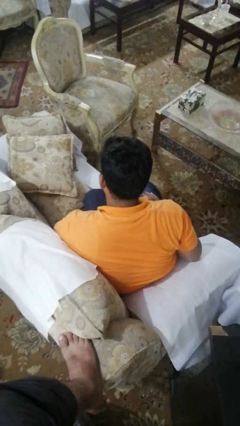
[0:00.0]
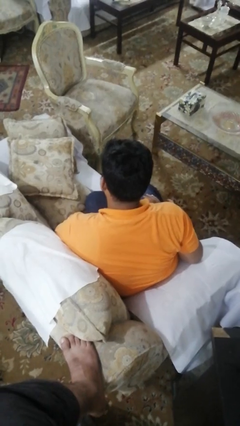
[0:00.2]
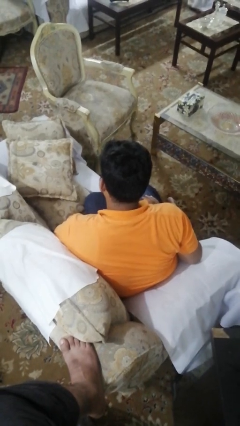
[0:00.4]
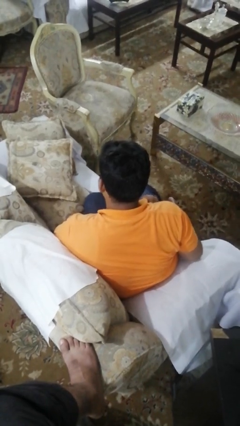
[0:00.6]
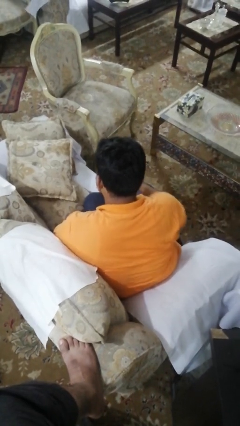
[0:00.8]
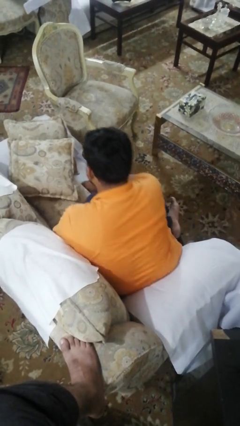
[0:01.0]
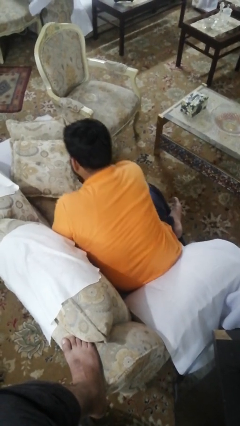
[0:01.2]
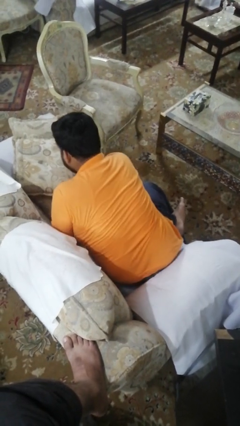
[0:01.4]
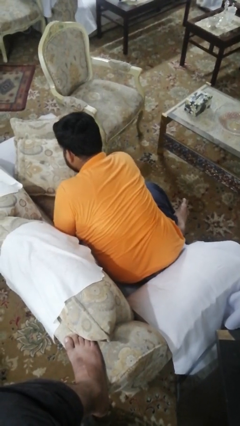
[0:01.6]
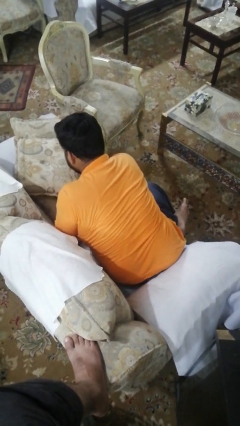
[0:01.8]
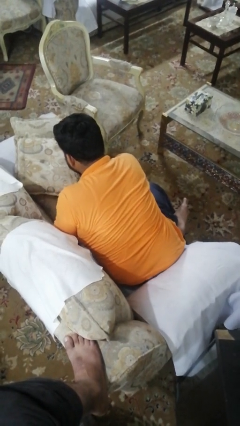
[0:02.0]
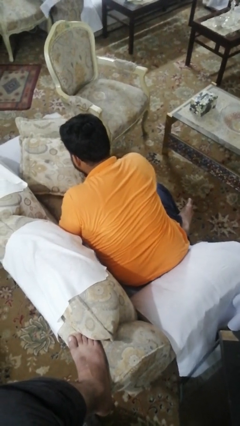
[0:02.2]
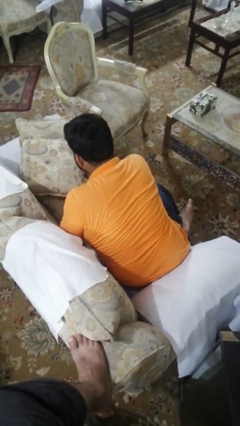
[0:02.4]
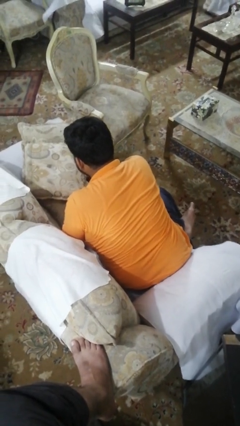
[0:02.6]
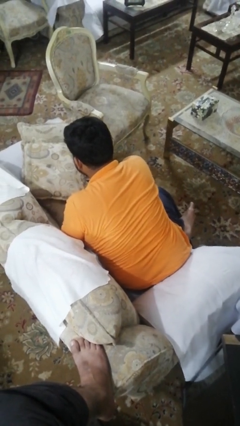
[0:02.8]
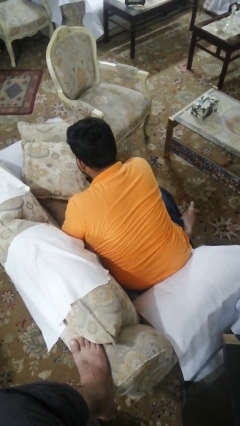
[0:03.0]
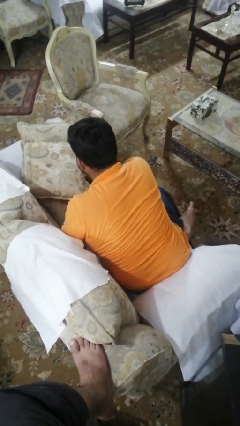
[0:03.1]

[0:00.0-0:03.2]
person searches in couch

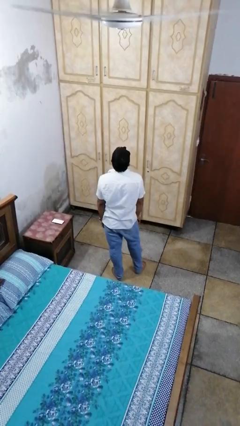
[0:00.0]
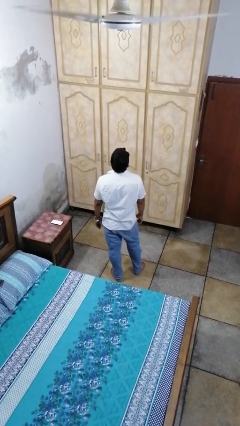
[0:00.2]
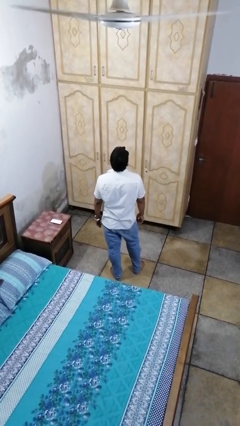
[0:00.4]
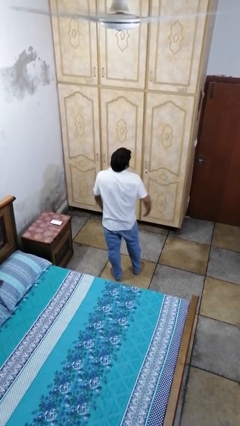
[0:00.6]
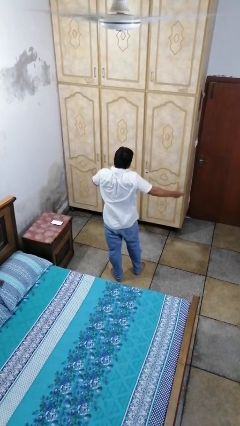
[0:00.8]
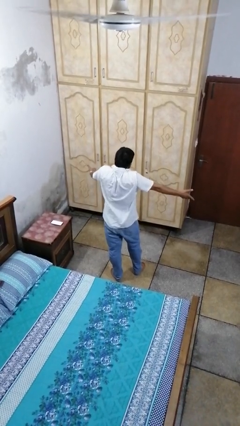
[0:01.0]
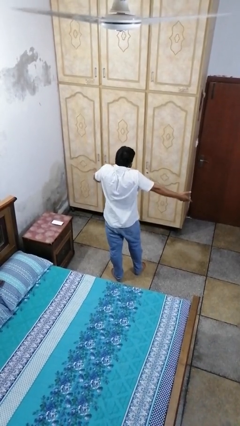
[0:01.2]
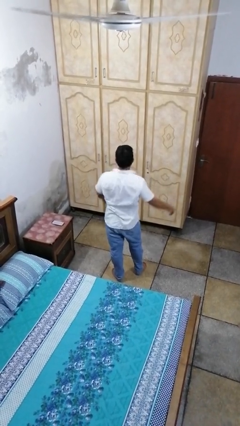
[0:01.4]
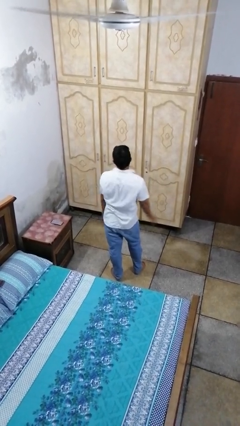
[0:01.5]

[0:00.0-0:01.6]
person shrugs

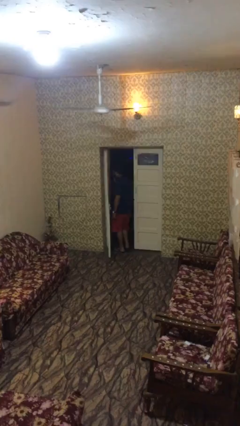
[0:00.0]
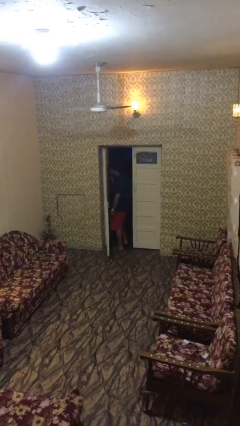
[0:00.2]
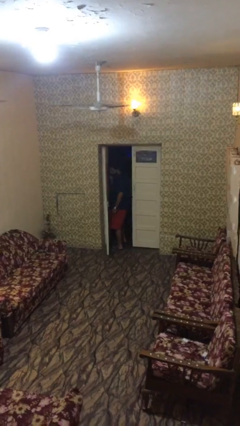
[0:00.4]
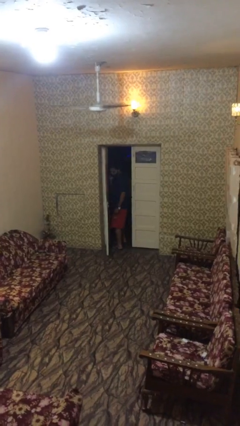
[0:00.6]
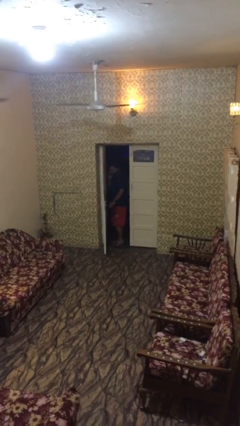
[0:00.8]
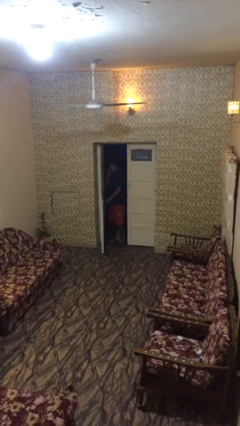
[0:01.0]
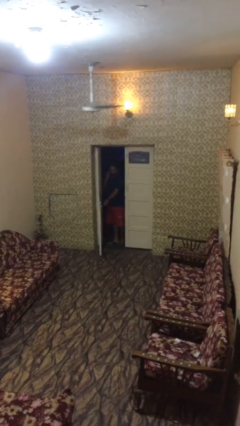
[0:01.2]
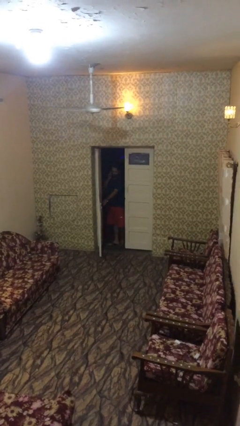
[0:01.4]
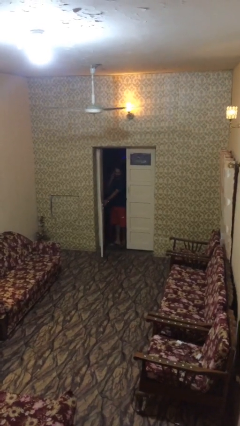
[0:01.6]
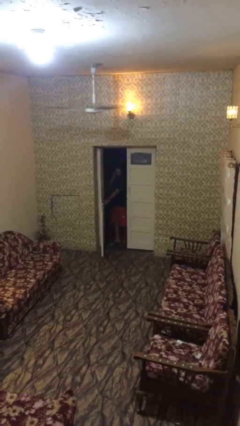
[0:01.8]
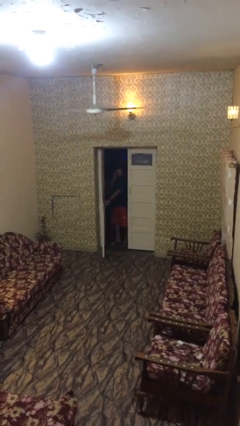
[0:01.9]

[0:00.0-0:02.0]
person exits scene through structure

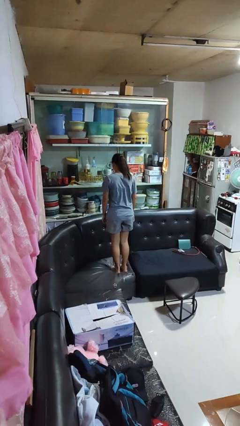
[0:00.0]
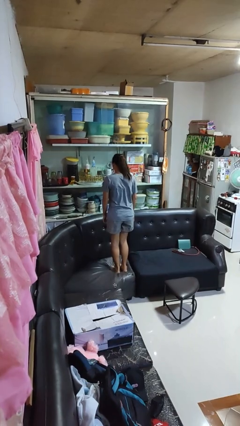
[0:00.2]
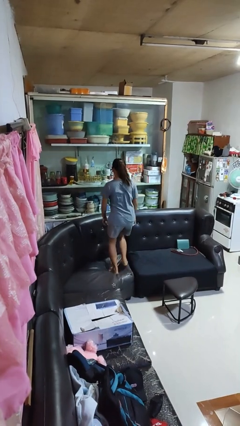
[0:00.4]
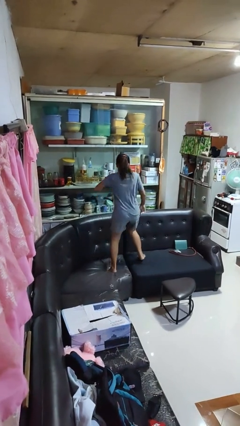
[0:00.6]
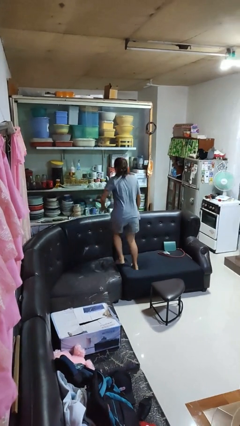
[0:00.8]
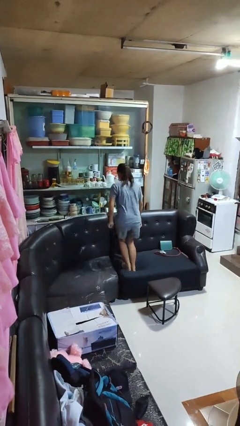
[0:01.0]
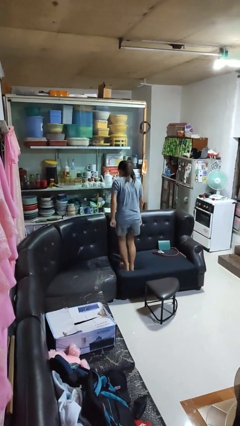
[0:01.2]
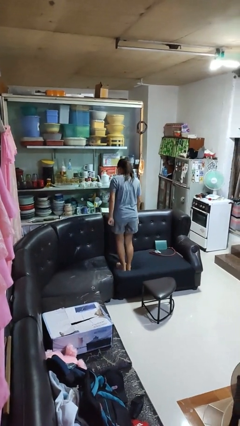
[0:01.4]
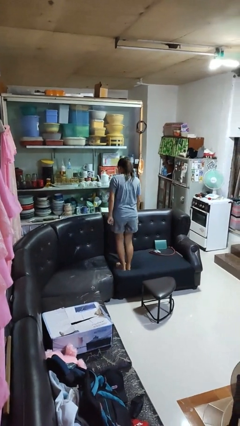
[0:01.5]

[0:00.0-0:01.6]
person jumps on couch

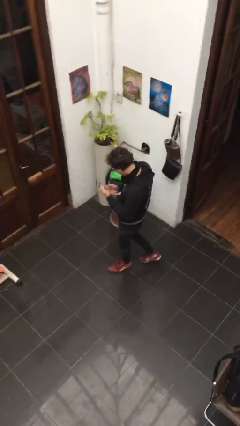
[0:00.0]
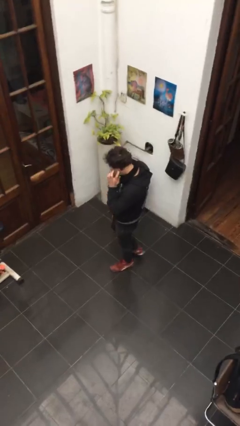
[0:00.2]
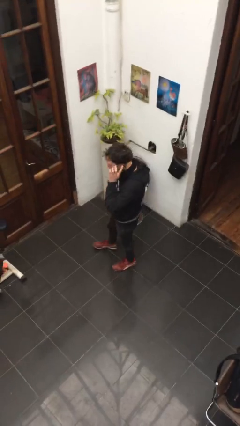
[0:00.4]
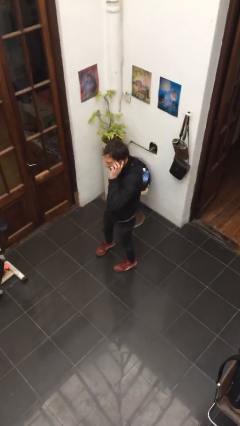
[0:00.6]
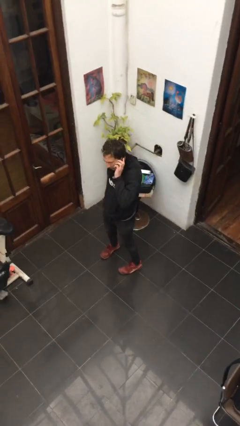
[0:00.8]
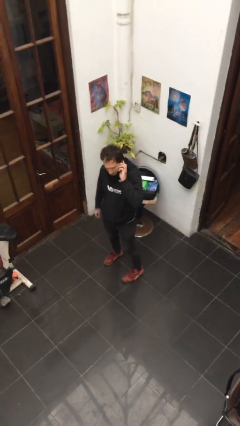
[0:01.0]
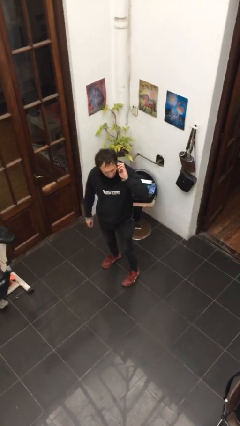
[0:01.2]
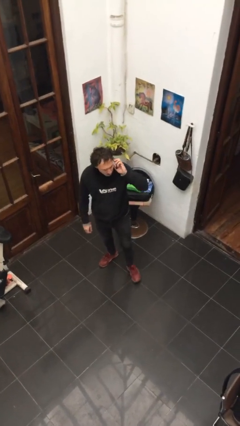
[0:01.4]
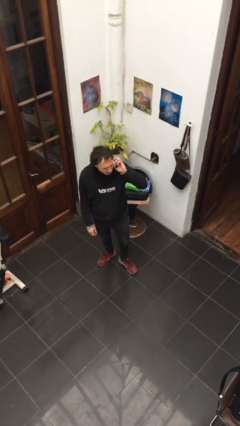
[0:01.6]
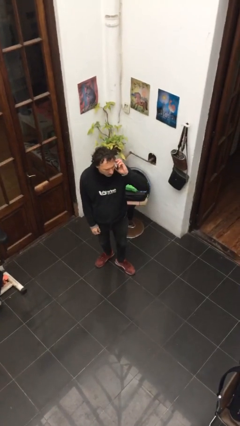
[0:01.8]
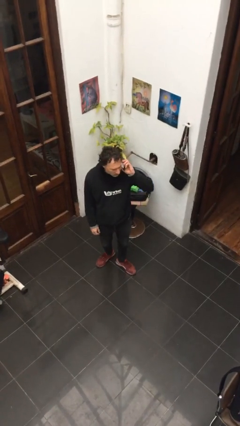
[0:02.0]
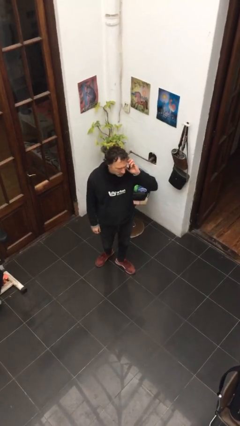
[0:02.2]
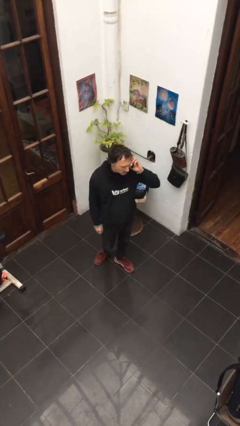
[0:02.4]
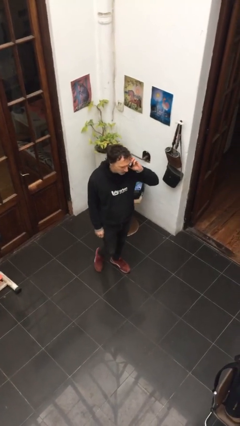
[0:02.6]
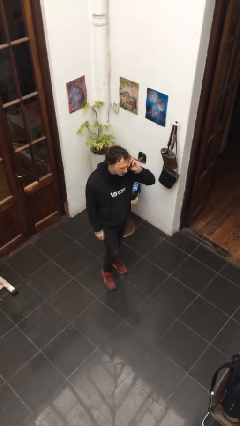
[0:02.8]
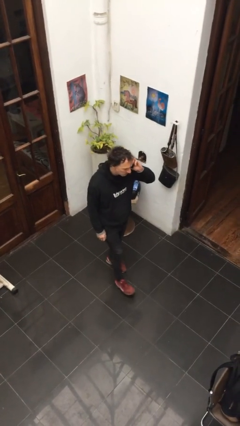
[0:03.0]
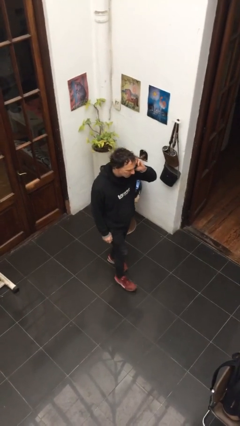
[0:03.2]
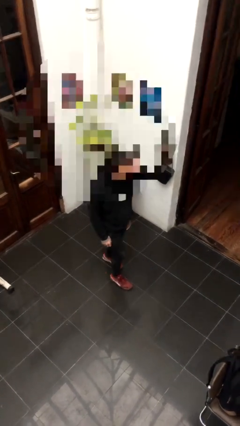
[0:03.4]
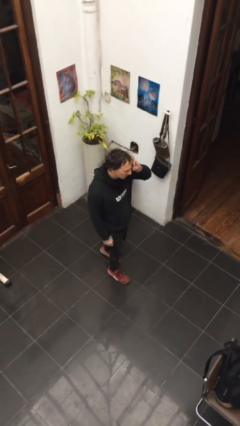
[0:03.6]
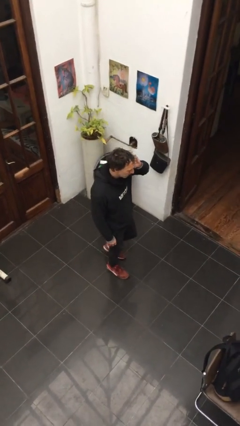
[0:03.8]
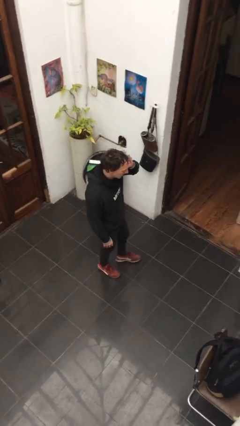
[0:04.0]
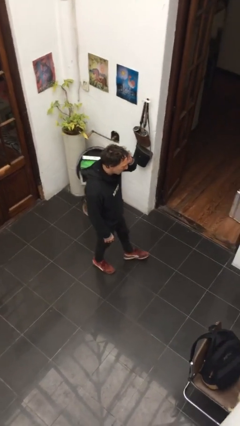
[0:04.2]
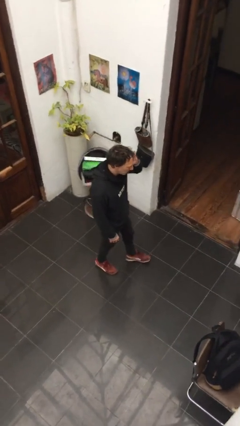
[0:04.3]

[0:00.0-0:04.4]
person talks on phone

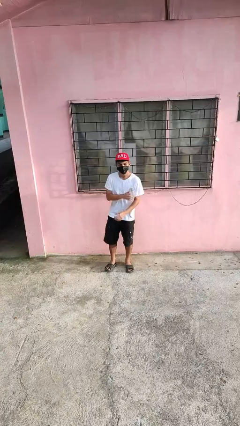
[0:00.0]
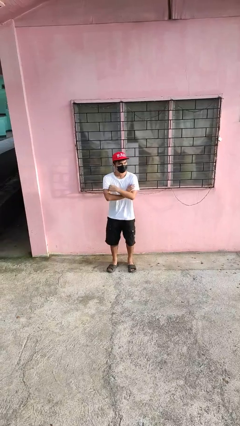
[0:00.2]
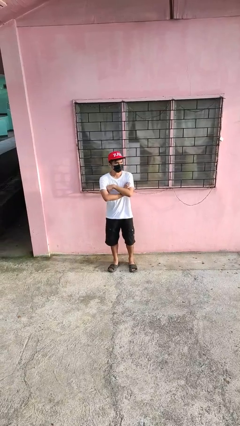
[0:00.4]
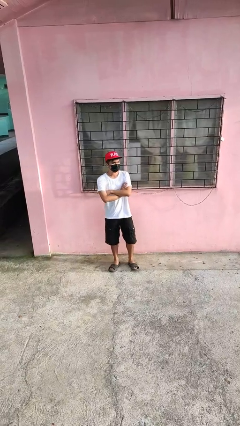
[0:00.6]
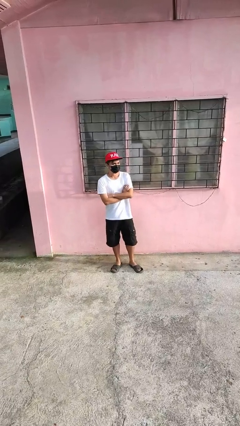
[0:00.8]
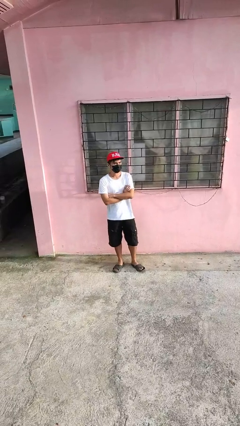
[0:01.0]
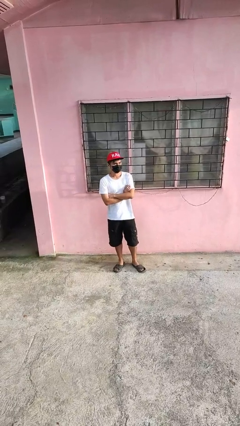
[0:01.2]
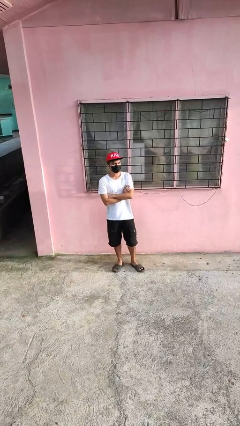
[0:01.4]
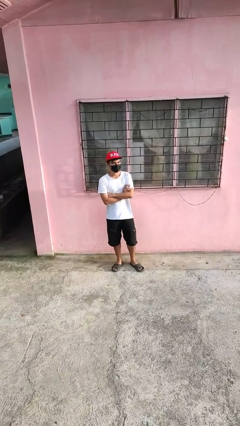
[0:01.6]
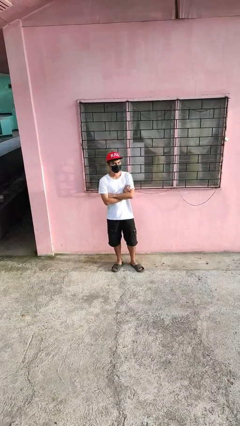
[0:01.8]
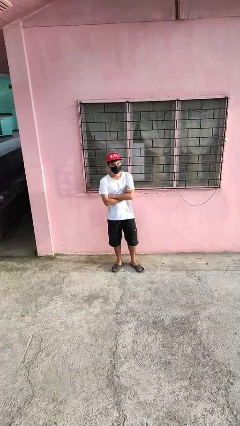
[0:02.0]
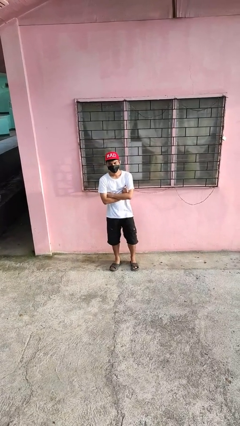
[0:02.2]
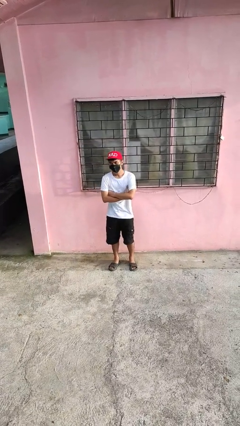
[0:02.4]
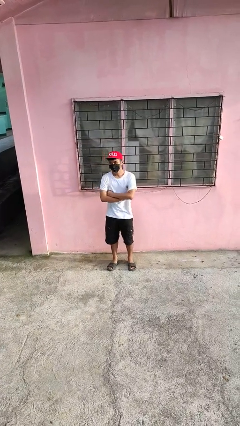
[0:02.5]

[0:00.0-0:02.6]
person crosses arms

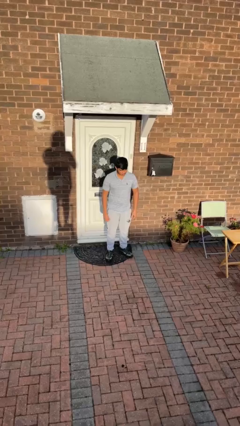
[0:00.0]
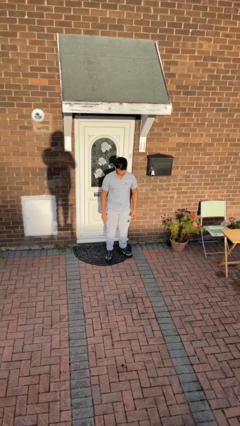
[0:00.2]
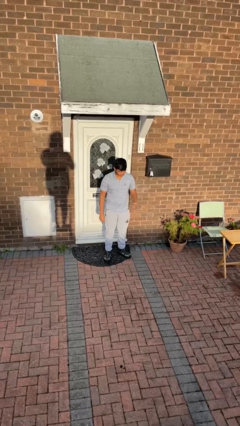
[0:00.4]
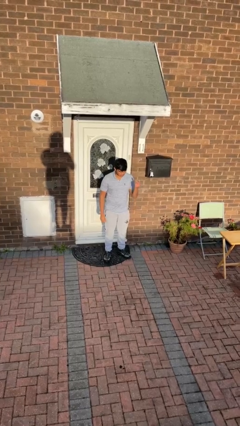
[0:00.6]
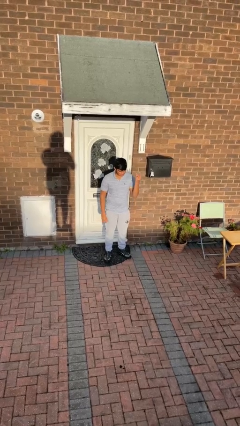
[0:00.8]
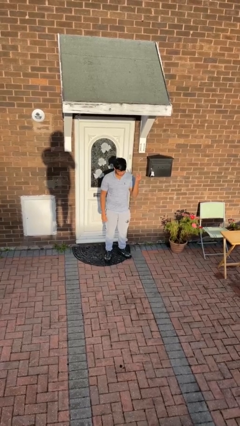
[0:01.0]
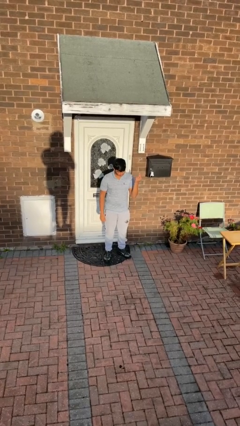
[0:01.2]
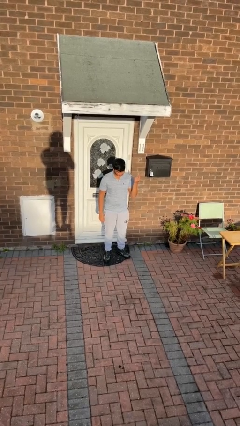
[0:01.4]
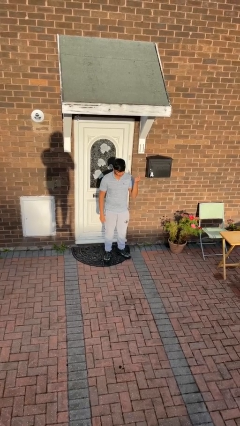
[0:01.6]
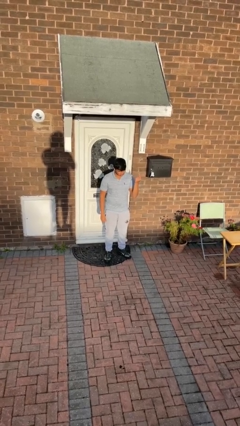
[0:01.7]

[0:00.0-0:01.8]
person snaps fingers
